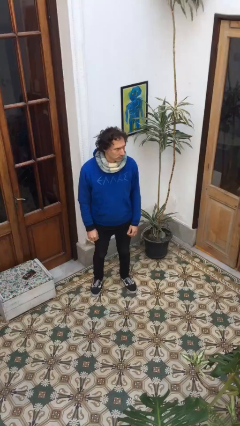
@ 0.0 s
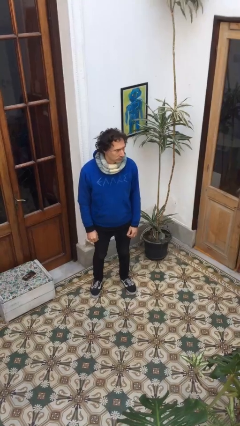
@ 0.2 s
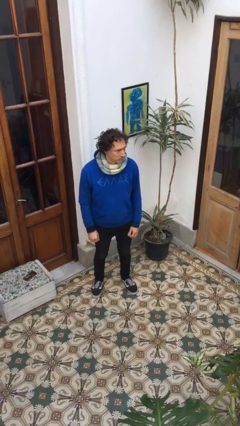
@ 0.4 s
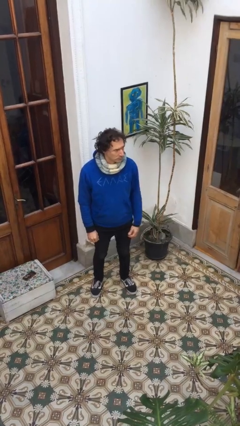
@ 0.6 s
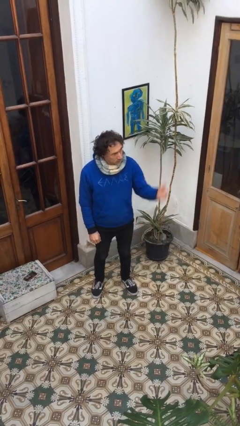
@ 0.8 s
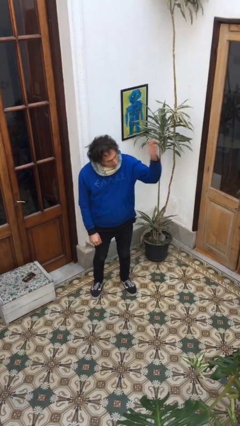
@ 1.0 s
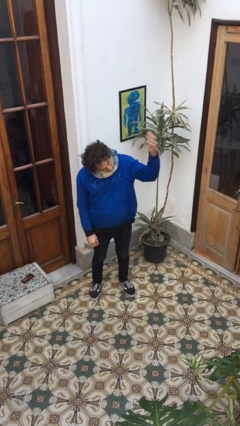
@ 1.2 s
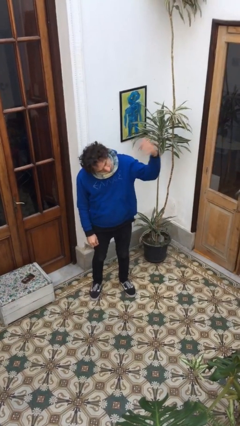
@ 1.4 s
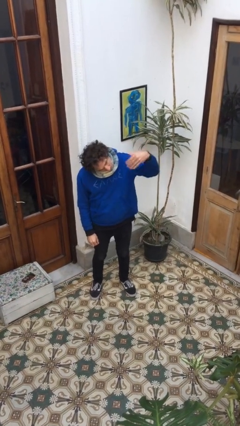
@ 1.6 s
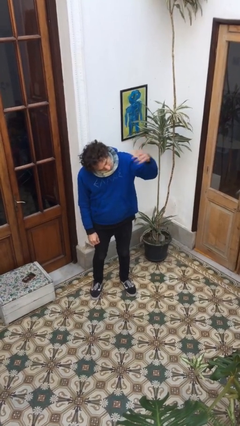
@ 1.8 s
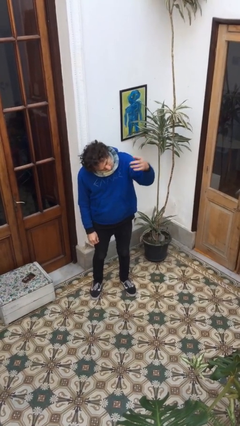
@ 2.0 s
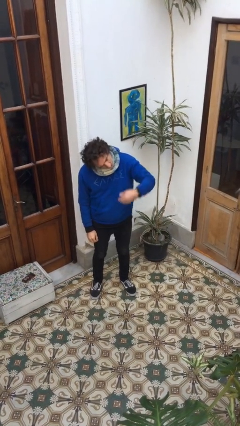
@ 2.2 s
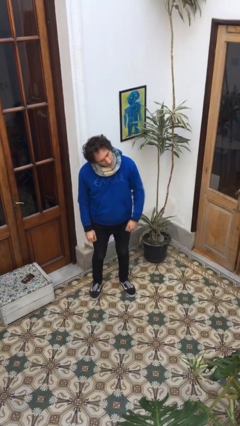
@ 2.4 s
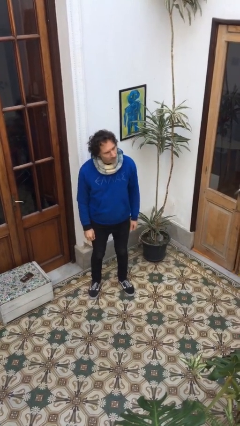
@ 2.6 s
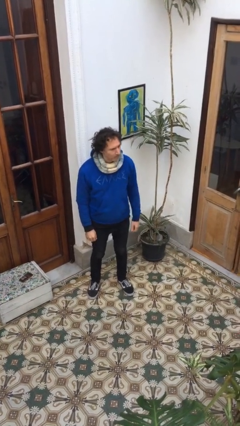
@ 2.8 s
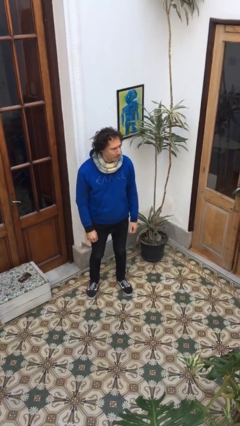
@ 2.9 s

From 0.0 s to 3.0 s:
person gestures come here

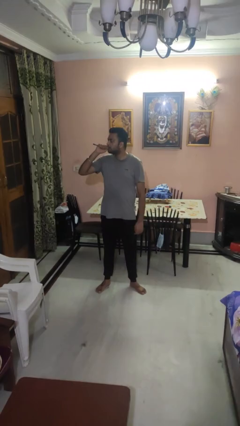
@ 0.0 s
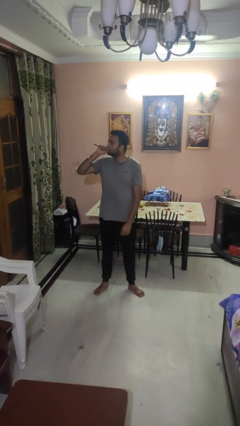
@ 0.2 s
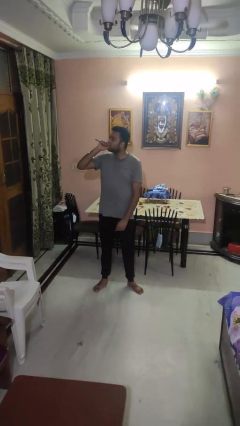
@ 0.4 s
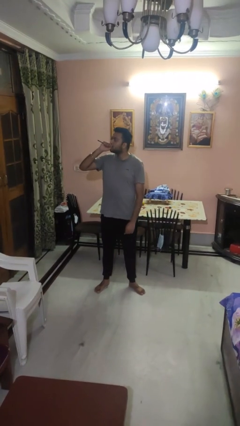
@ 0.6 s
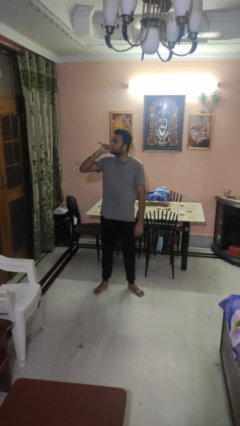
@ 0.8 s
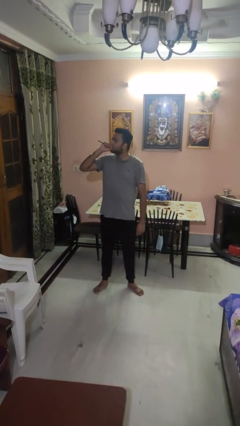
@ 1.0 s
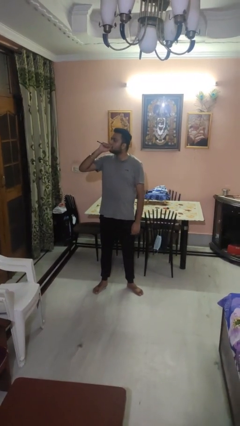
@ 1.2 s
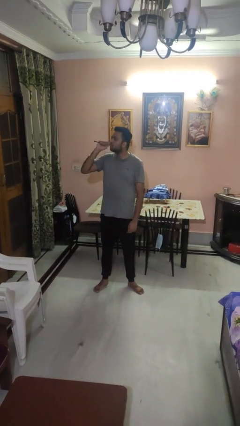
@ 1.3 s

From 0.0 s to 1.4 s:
person vapes

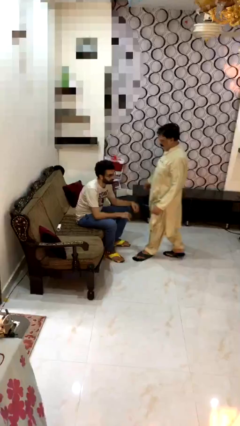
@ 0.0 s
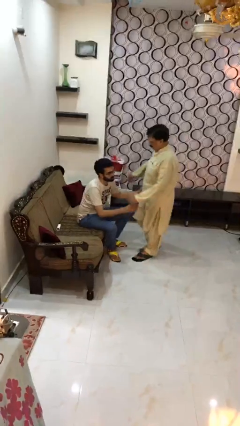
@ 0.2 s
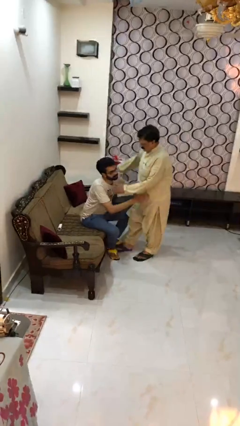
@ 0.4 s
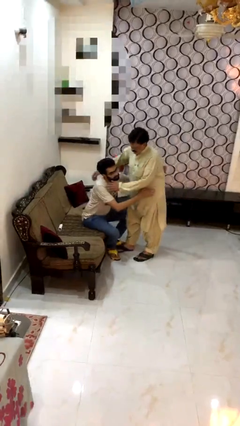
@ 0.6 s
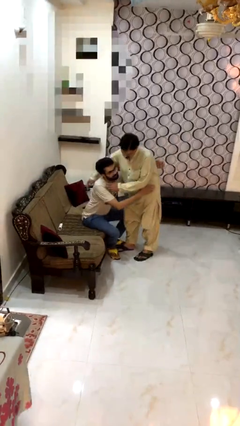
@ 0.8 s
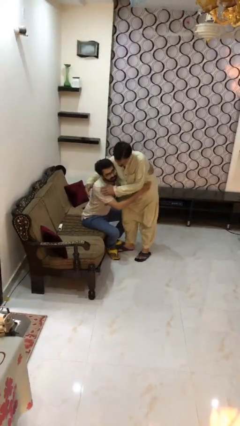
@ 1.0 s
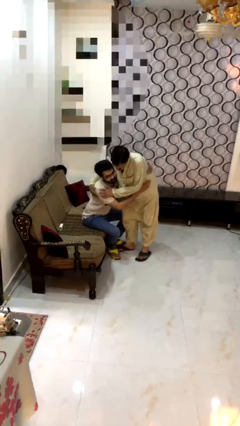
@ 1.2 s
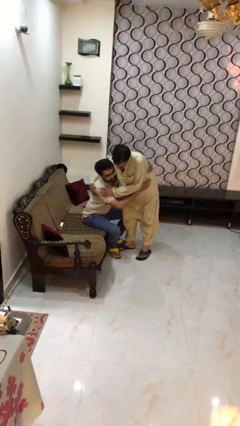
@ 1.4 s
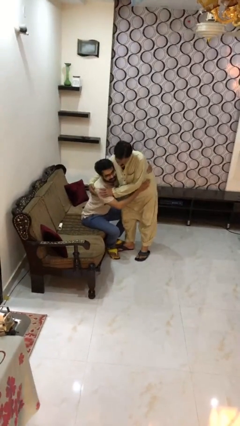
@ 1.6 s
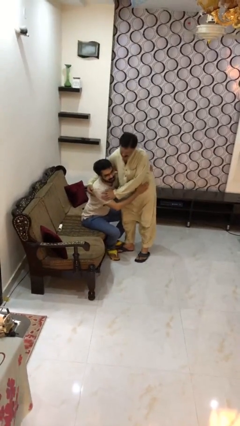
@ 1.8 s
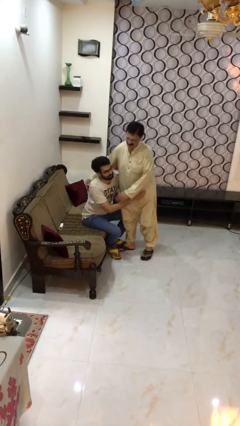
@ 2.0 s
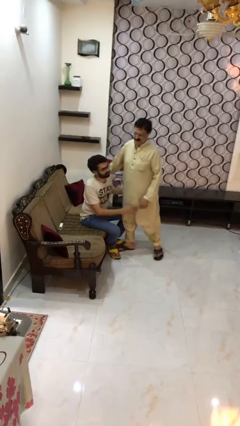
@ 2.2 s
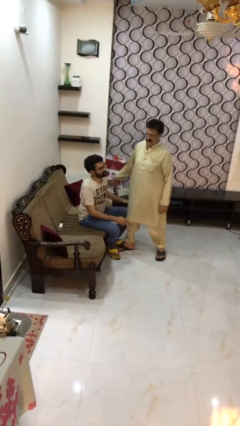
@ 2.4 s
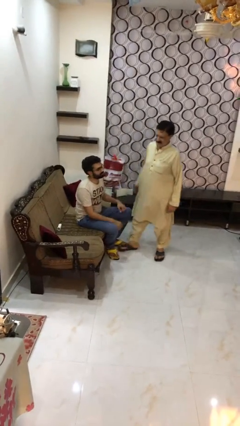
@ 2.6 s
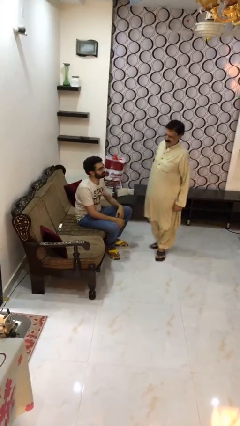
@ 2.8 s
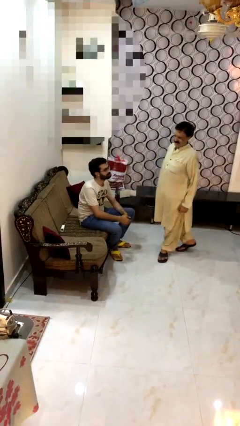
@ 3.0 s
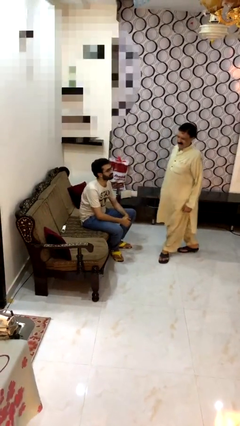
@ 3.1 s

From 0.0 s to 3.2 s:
person embraces person

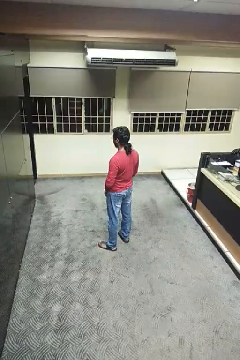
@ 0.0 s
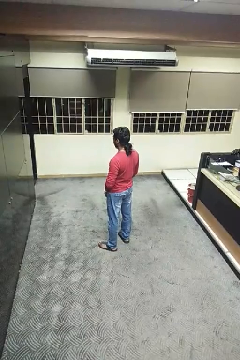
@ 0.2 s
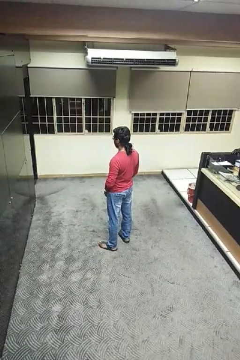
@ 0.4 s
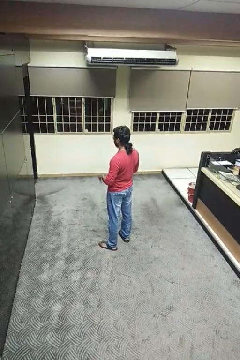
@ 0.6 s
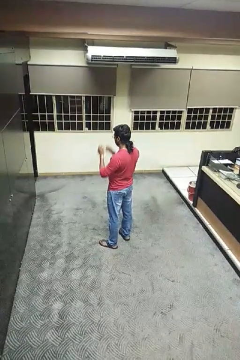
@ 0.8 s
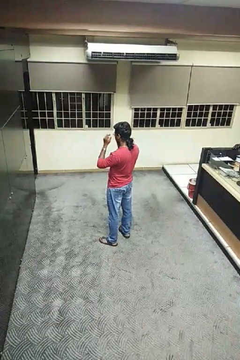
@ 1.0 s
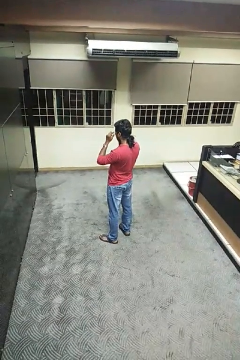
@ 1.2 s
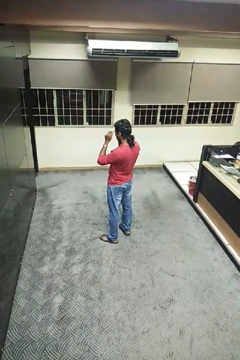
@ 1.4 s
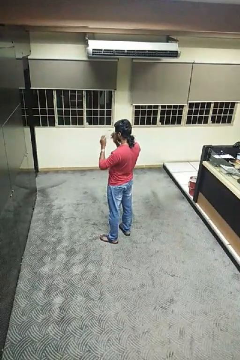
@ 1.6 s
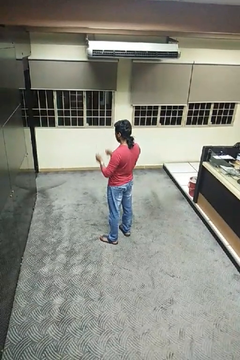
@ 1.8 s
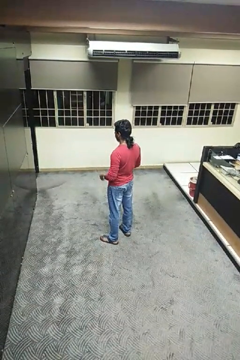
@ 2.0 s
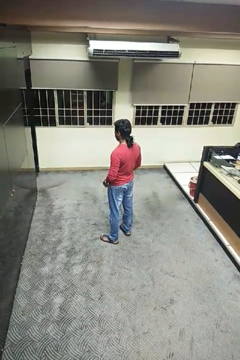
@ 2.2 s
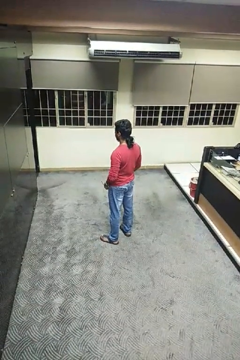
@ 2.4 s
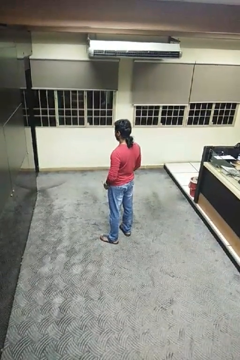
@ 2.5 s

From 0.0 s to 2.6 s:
person takes off glasses

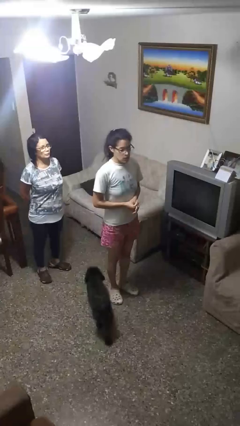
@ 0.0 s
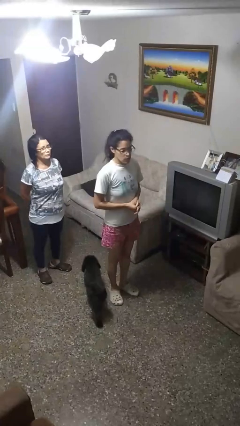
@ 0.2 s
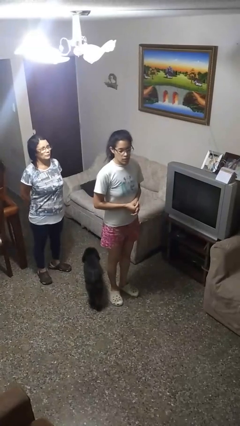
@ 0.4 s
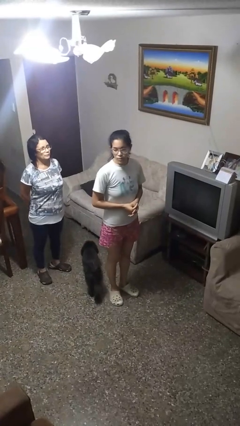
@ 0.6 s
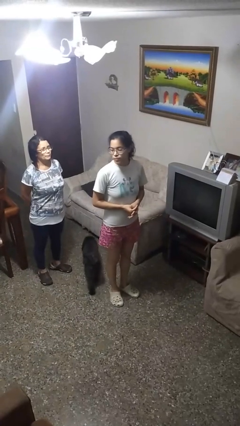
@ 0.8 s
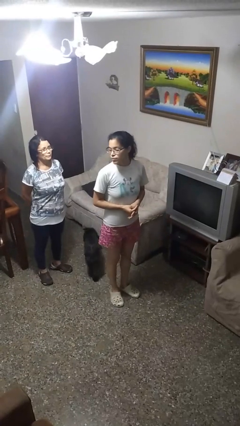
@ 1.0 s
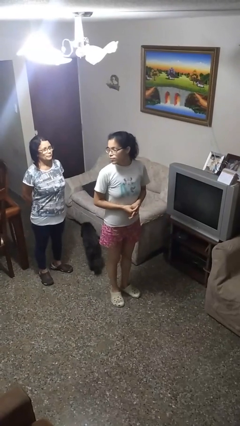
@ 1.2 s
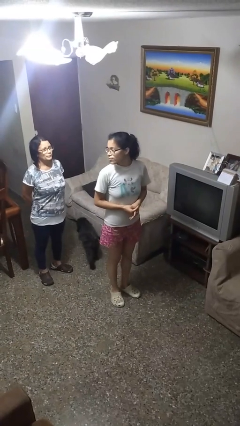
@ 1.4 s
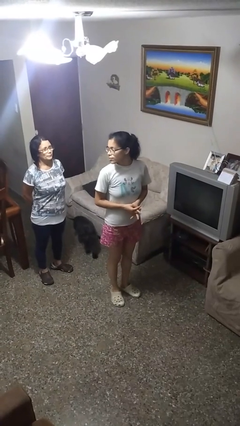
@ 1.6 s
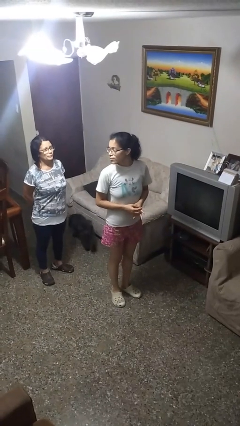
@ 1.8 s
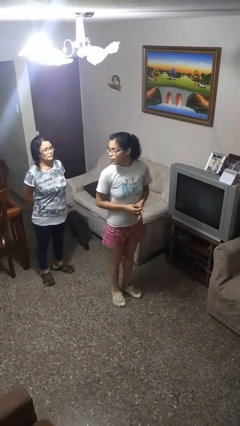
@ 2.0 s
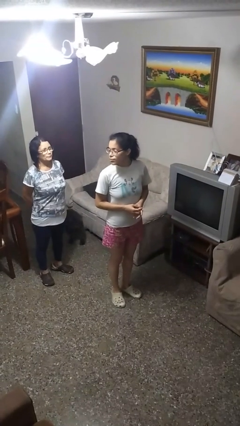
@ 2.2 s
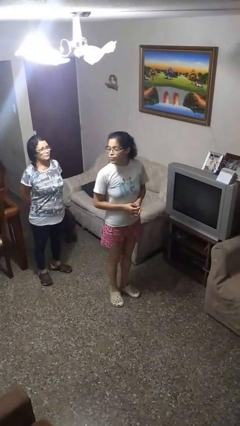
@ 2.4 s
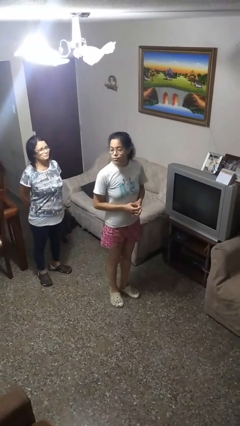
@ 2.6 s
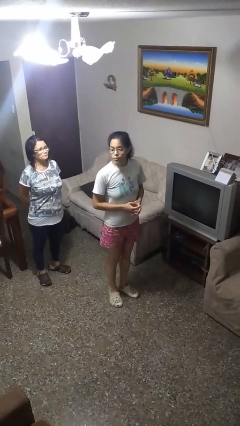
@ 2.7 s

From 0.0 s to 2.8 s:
person looks over shoulder

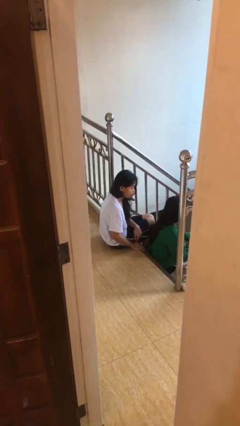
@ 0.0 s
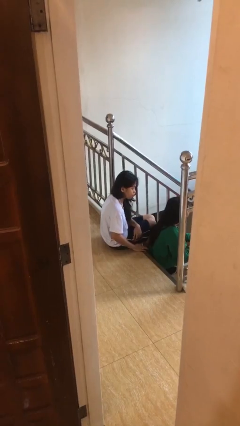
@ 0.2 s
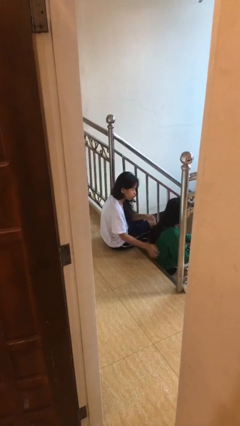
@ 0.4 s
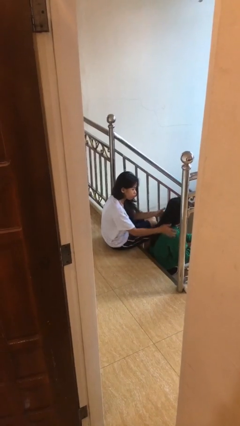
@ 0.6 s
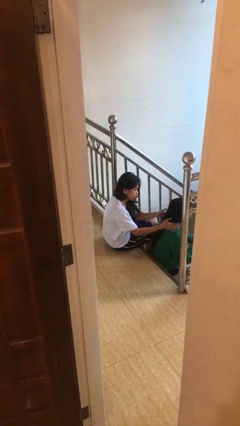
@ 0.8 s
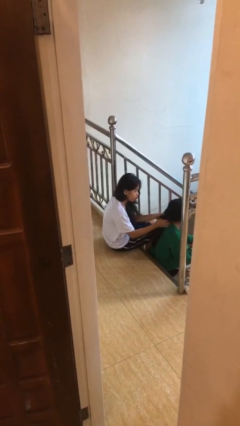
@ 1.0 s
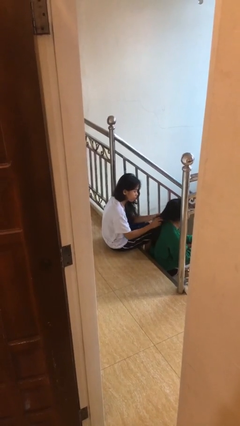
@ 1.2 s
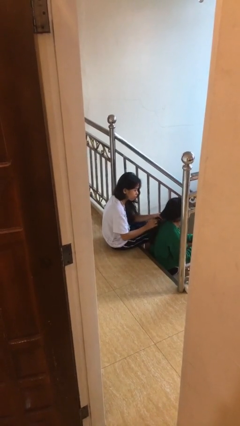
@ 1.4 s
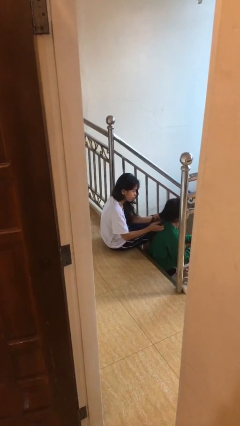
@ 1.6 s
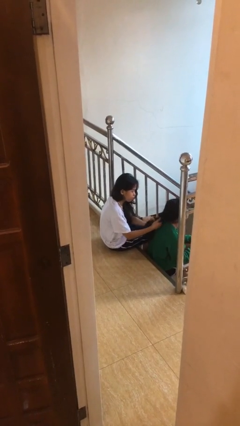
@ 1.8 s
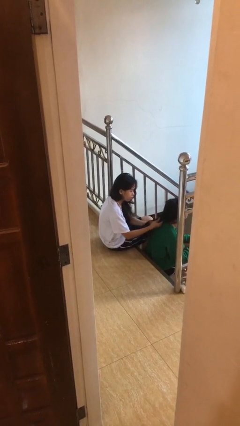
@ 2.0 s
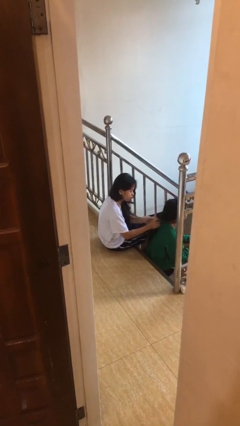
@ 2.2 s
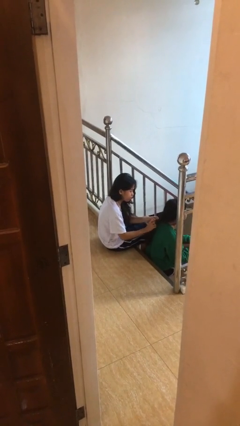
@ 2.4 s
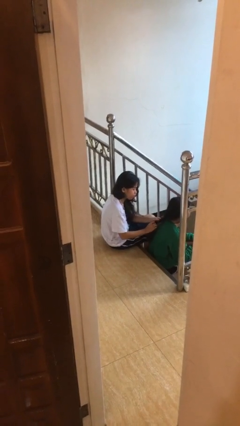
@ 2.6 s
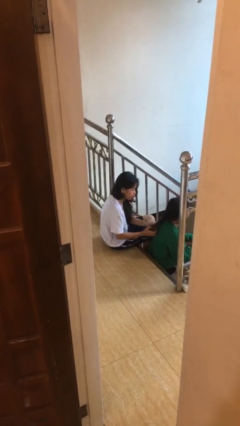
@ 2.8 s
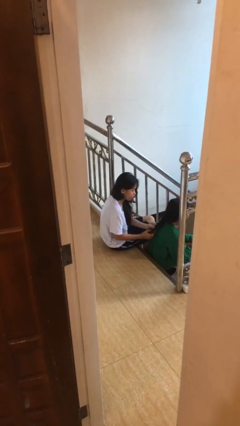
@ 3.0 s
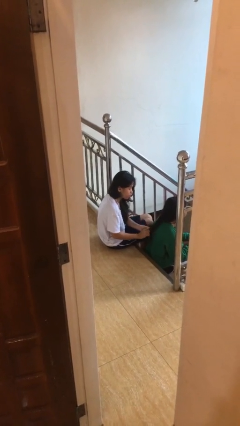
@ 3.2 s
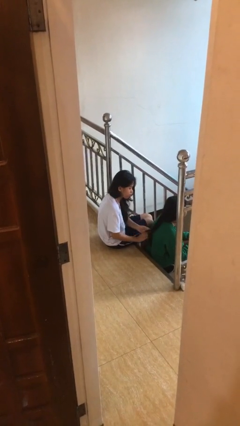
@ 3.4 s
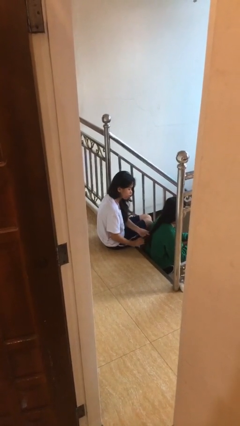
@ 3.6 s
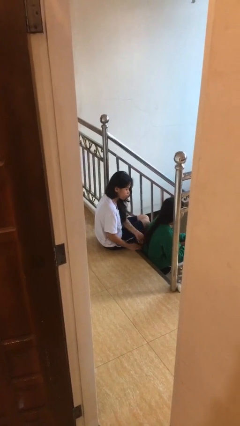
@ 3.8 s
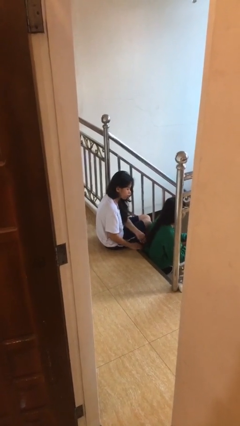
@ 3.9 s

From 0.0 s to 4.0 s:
person braids hair of person

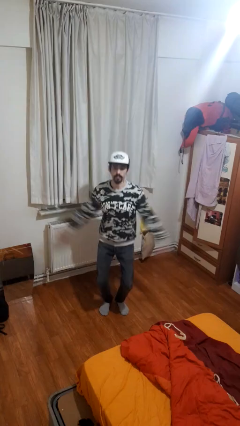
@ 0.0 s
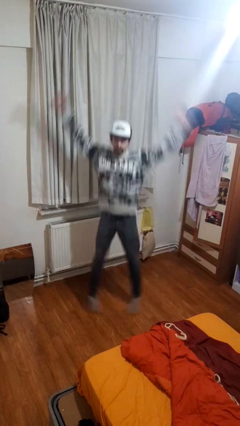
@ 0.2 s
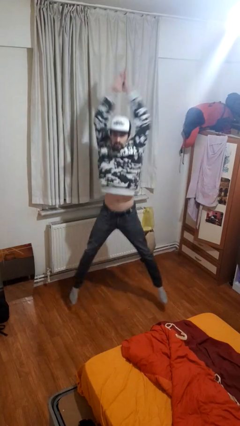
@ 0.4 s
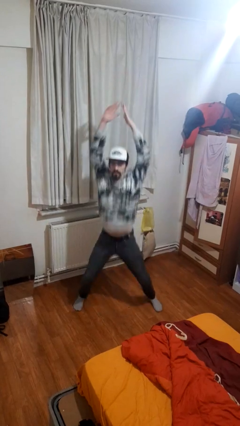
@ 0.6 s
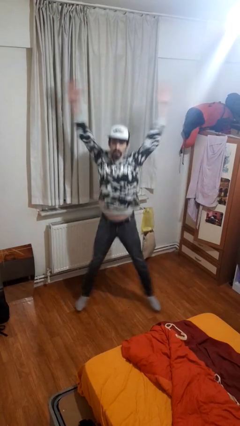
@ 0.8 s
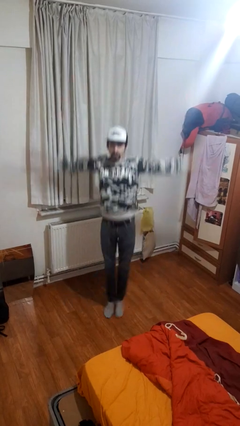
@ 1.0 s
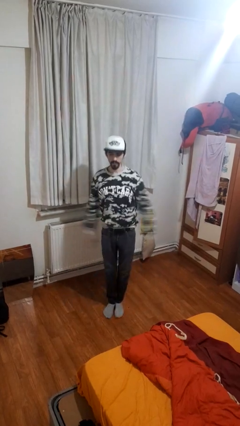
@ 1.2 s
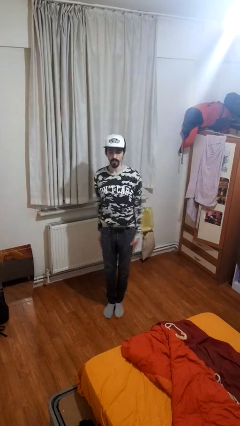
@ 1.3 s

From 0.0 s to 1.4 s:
person exercises with jumping jacks
